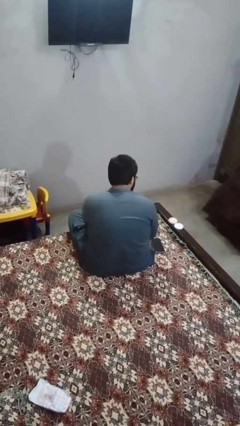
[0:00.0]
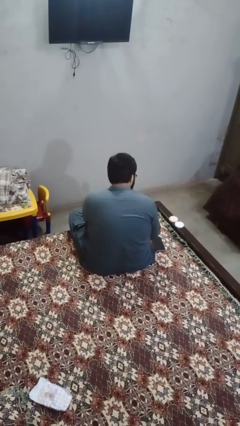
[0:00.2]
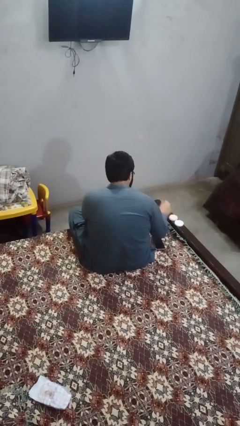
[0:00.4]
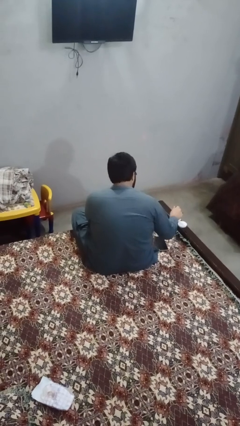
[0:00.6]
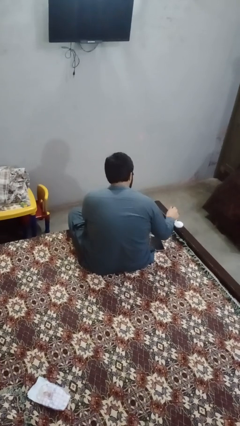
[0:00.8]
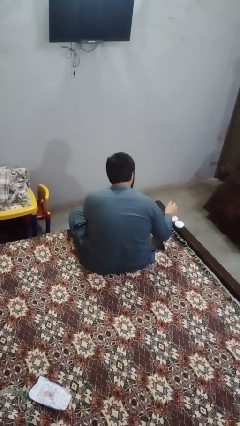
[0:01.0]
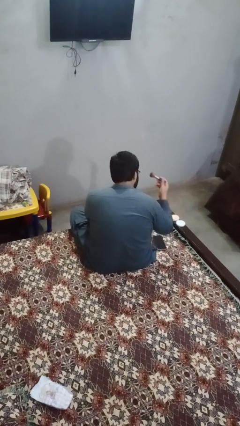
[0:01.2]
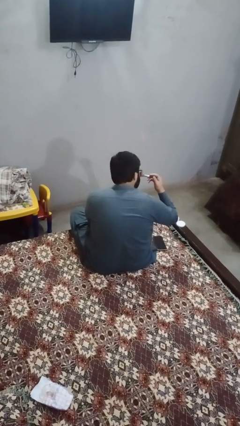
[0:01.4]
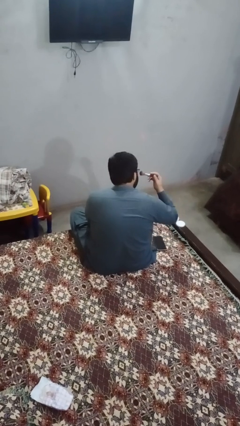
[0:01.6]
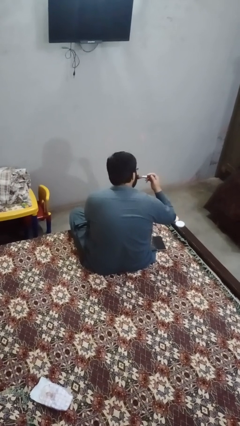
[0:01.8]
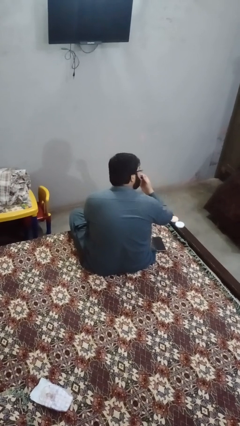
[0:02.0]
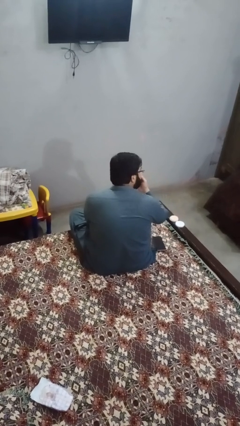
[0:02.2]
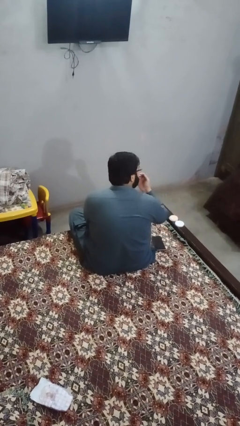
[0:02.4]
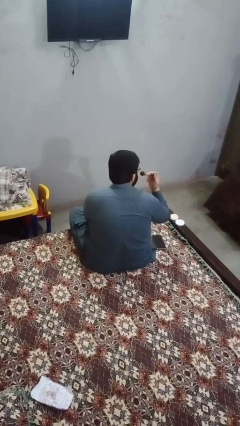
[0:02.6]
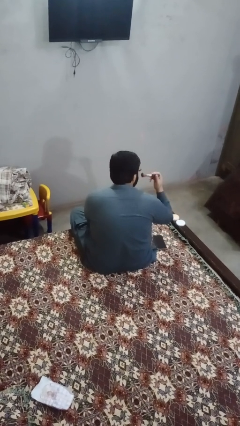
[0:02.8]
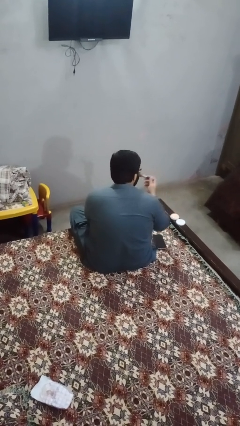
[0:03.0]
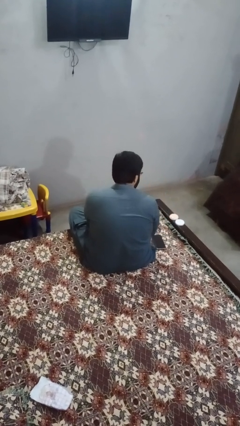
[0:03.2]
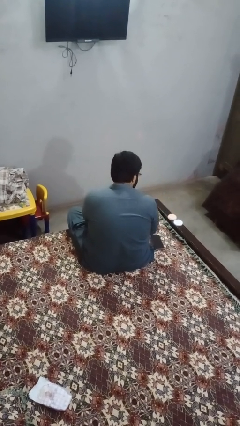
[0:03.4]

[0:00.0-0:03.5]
person applies foundation makeup

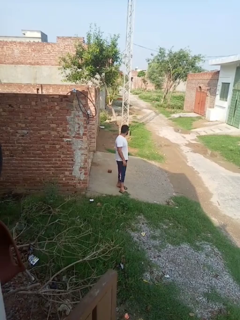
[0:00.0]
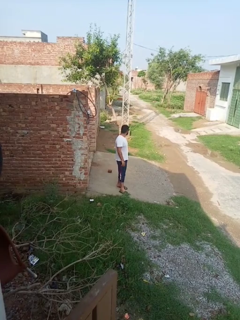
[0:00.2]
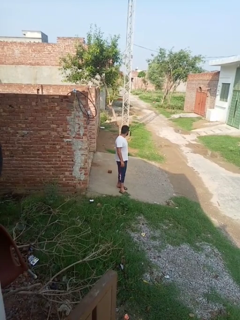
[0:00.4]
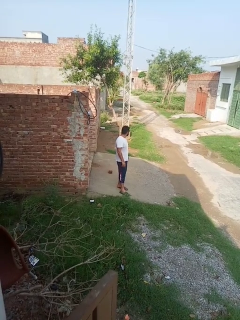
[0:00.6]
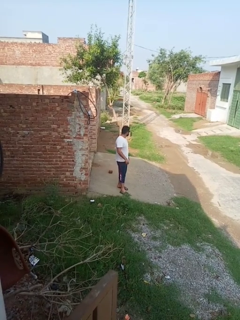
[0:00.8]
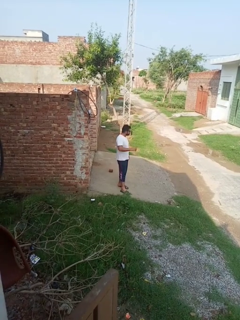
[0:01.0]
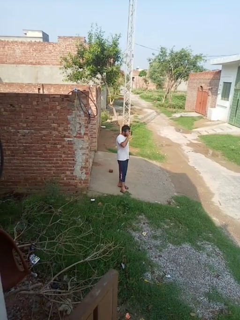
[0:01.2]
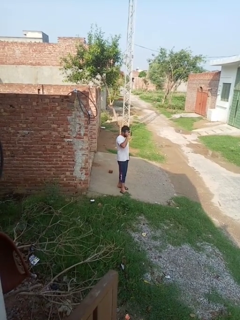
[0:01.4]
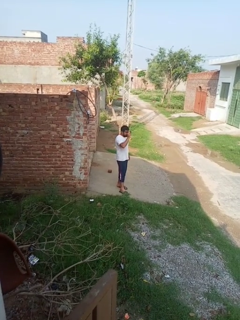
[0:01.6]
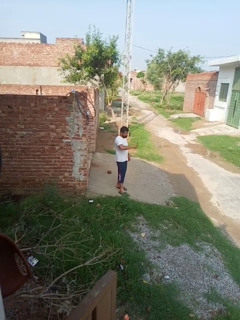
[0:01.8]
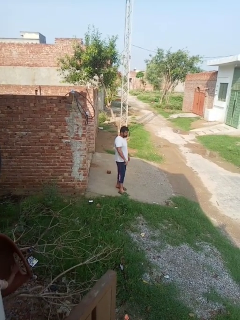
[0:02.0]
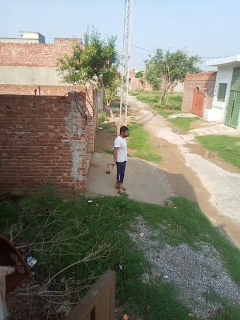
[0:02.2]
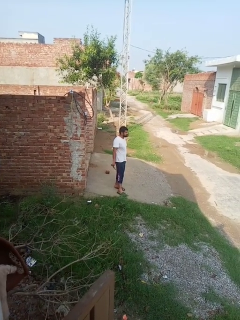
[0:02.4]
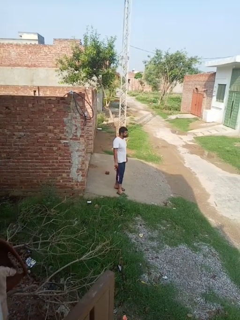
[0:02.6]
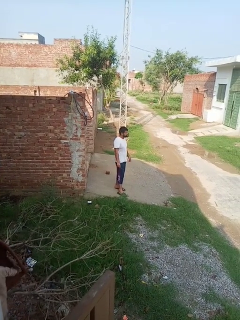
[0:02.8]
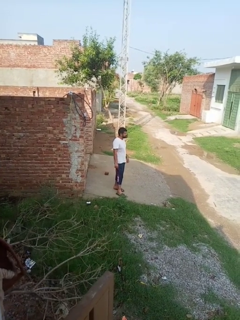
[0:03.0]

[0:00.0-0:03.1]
person takes off glasses

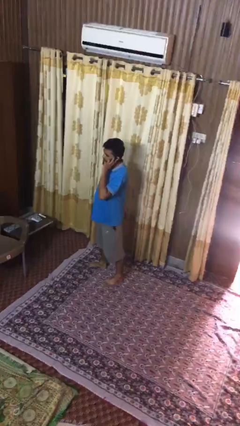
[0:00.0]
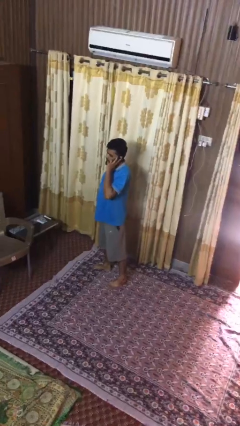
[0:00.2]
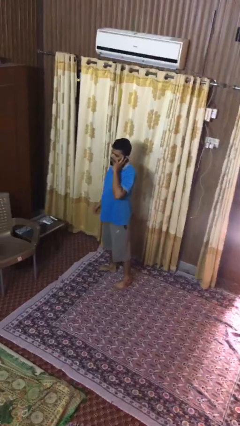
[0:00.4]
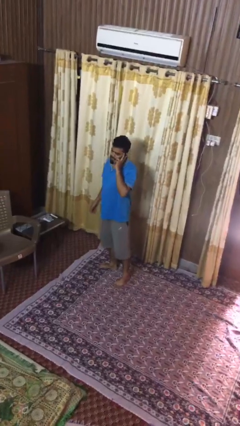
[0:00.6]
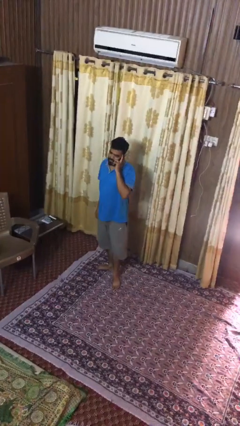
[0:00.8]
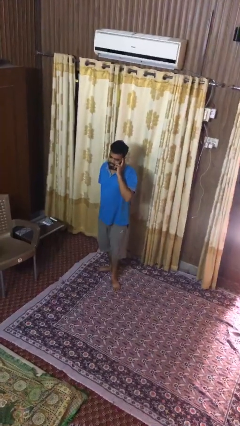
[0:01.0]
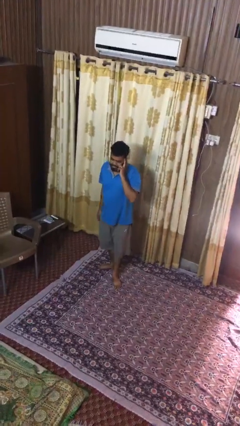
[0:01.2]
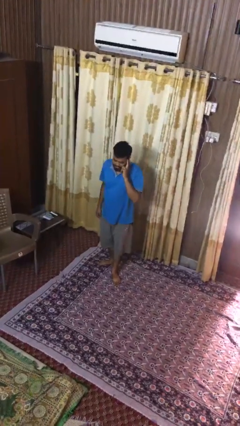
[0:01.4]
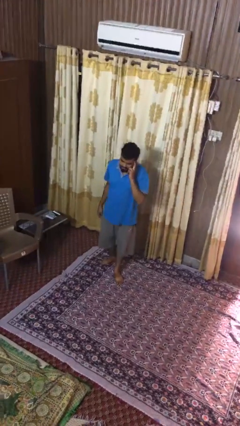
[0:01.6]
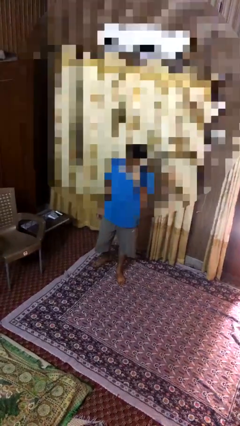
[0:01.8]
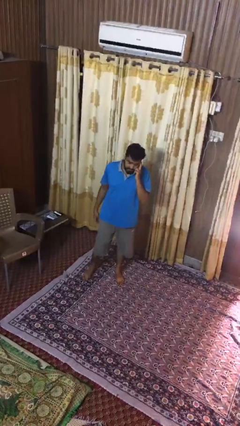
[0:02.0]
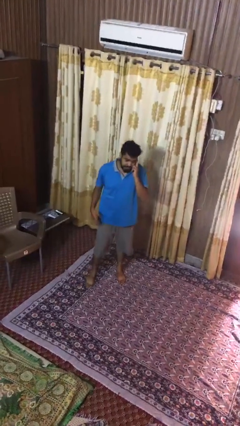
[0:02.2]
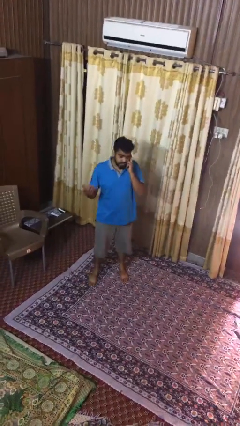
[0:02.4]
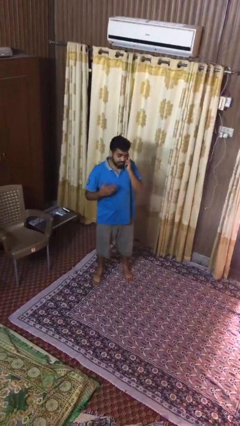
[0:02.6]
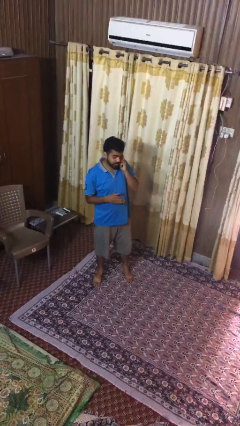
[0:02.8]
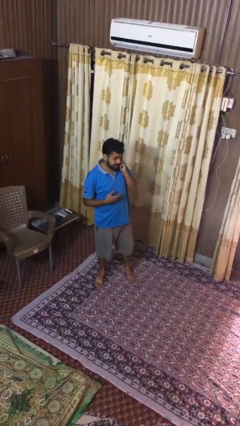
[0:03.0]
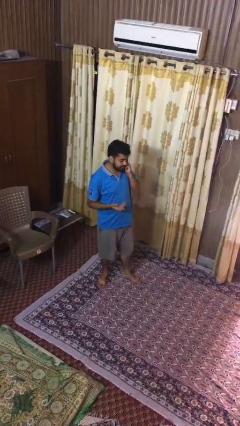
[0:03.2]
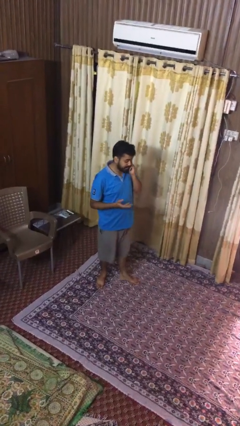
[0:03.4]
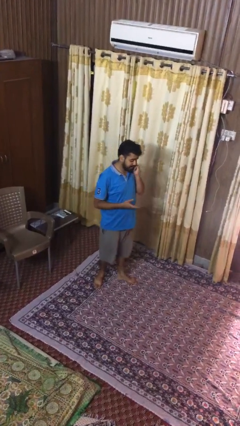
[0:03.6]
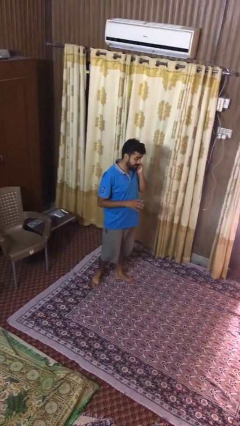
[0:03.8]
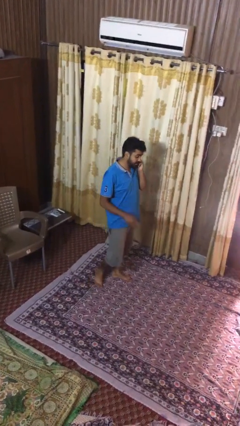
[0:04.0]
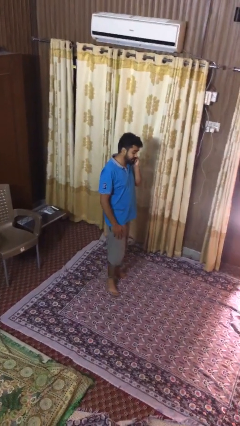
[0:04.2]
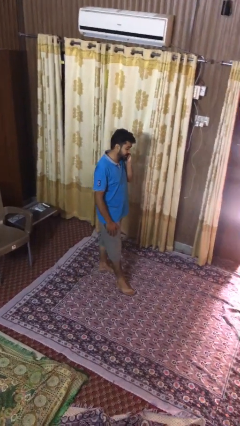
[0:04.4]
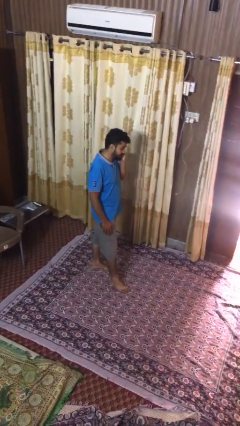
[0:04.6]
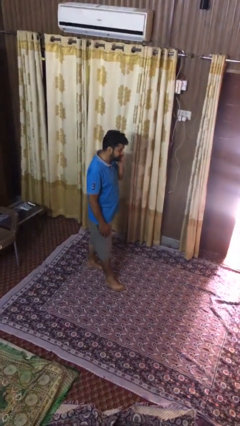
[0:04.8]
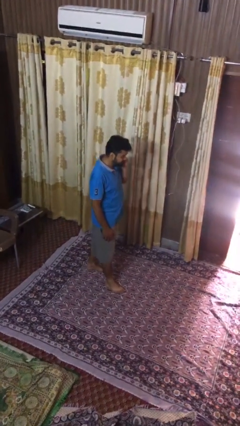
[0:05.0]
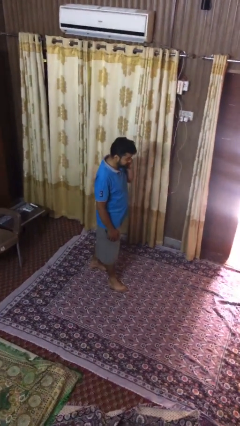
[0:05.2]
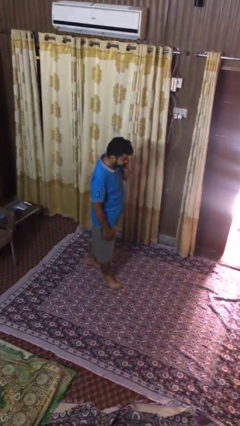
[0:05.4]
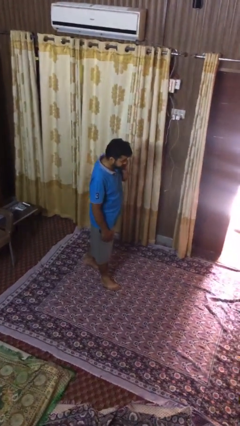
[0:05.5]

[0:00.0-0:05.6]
person talks on phone

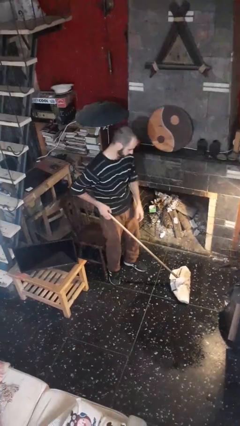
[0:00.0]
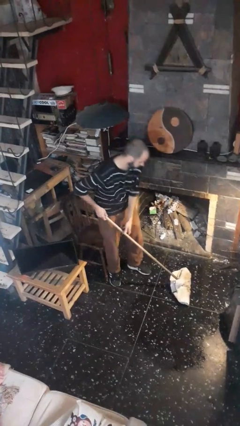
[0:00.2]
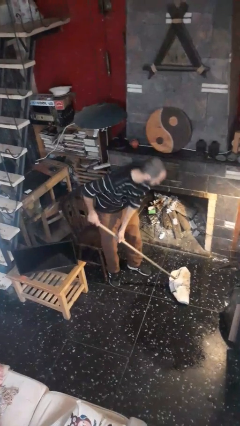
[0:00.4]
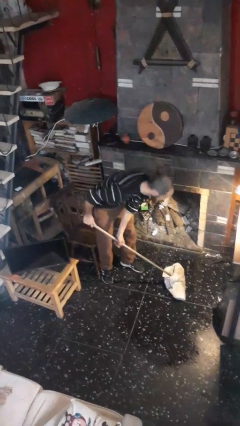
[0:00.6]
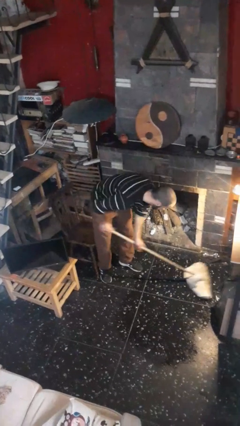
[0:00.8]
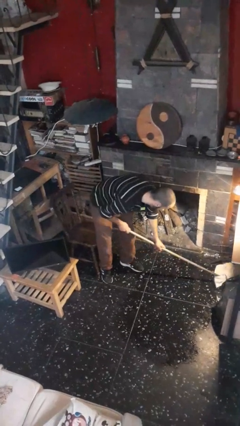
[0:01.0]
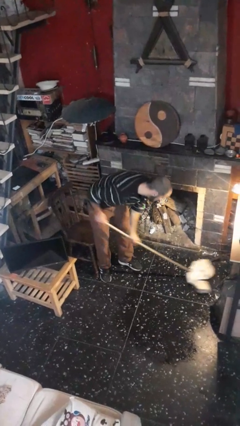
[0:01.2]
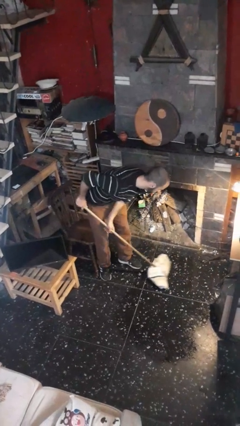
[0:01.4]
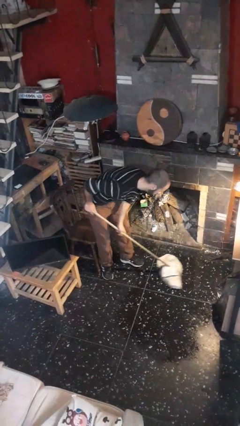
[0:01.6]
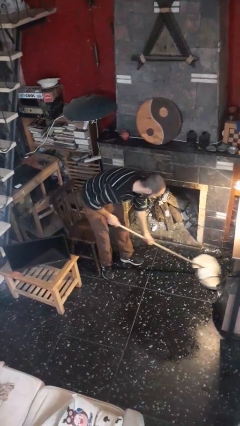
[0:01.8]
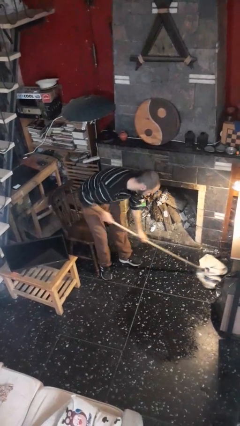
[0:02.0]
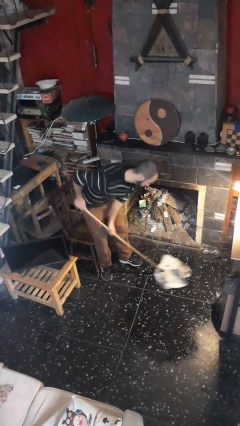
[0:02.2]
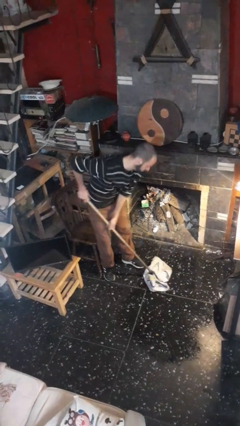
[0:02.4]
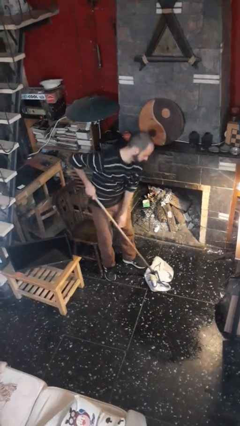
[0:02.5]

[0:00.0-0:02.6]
person mops

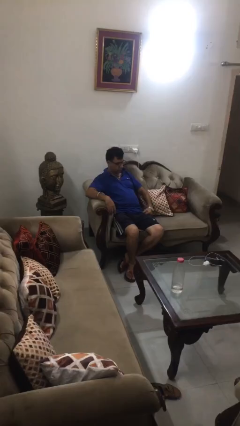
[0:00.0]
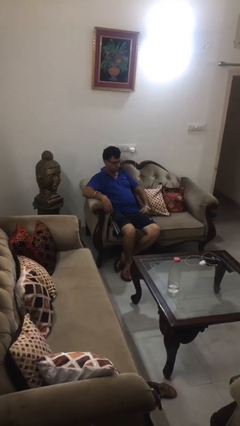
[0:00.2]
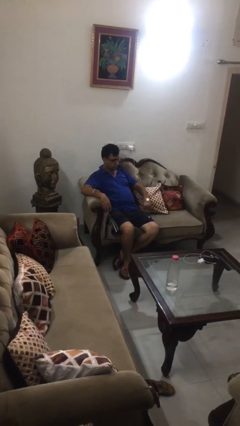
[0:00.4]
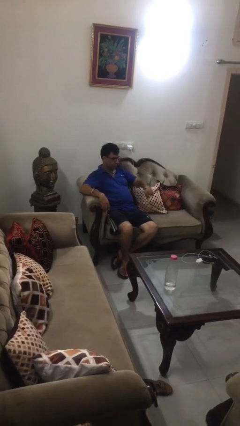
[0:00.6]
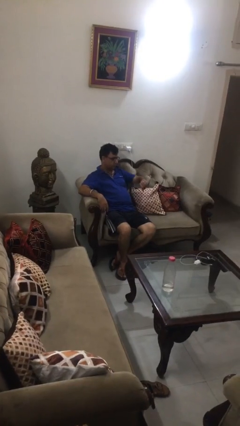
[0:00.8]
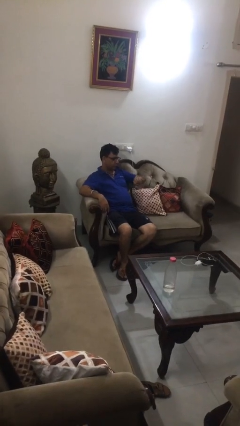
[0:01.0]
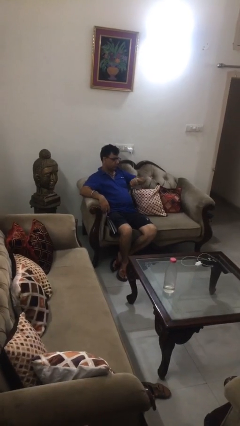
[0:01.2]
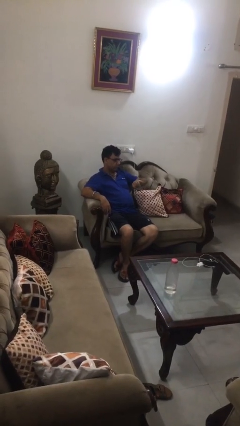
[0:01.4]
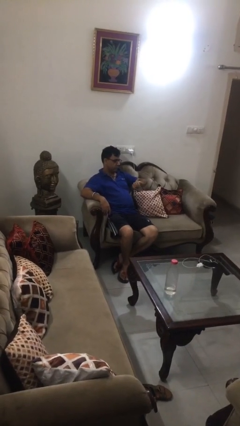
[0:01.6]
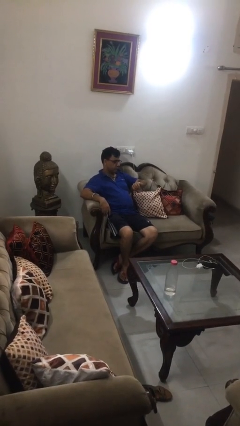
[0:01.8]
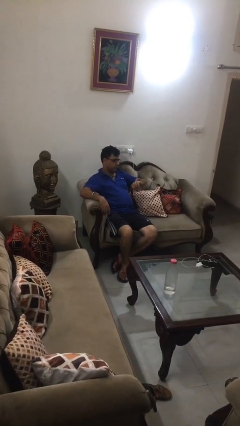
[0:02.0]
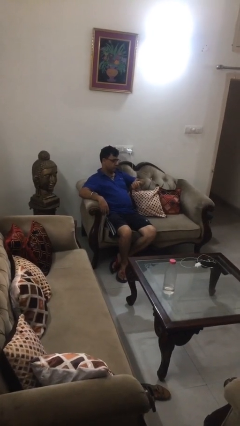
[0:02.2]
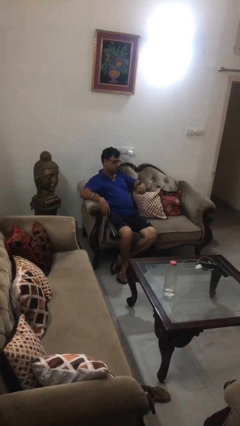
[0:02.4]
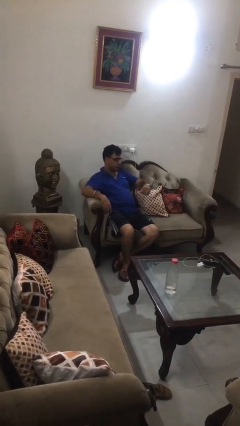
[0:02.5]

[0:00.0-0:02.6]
person looks at wristwatch

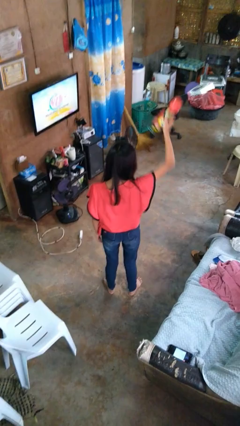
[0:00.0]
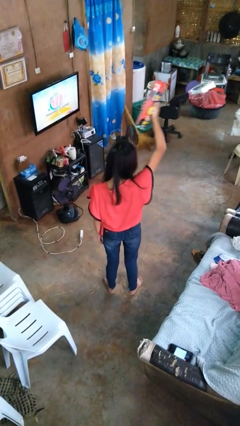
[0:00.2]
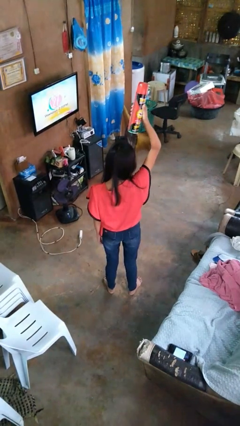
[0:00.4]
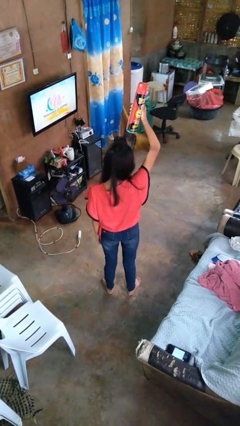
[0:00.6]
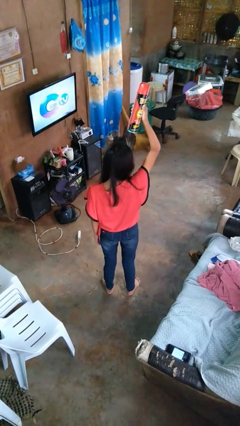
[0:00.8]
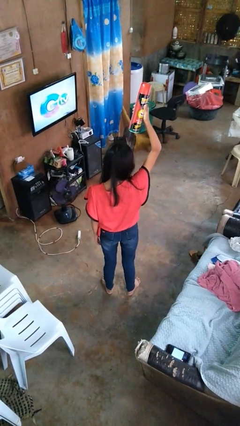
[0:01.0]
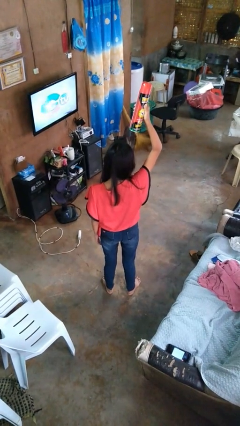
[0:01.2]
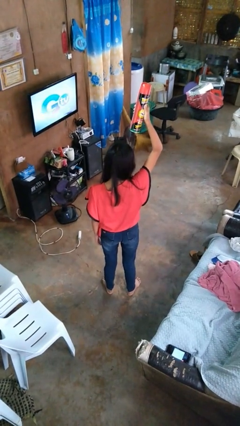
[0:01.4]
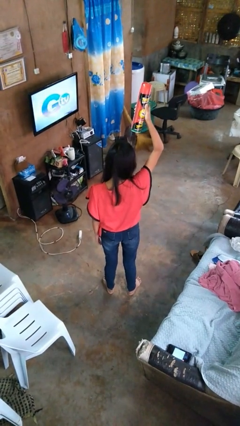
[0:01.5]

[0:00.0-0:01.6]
person holds object above head
